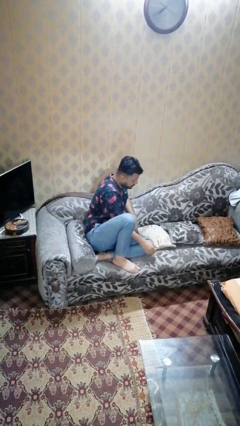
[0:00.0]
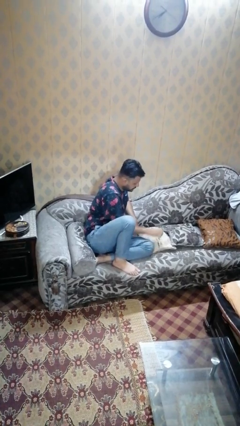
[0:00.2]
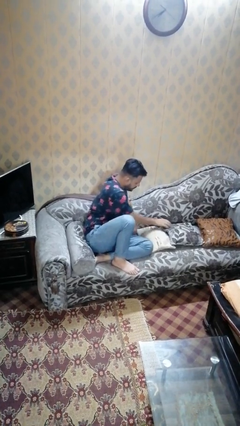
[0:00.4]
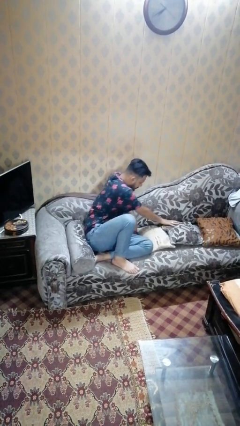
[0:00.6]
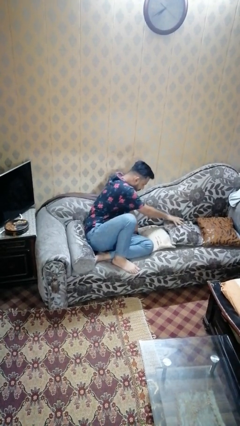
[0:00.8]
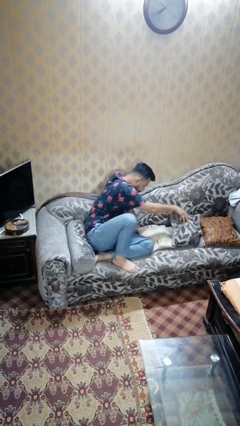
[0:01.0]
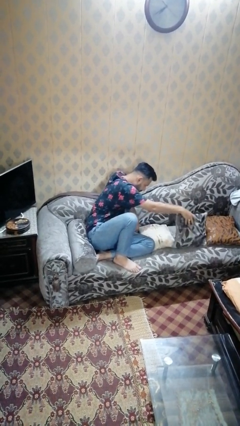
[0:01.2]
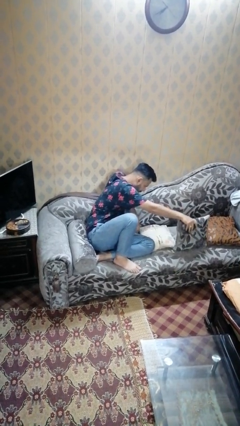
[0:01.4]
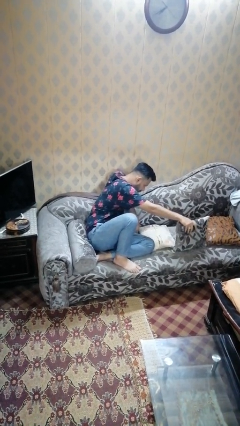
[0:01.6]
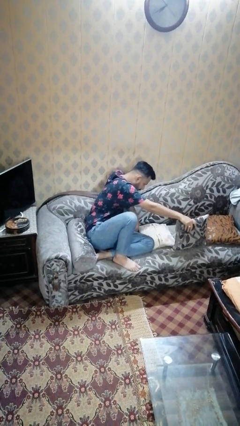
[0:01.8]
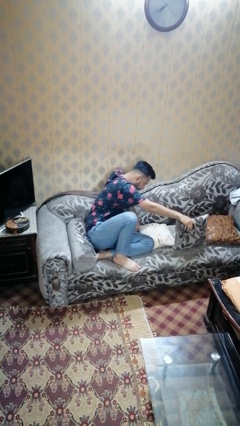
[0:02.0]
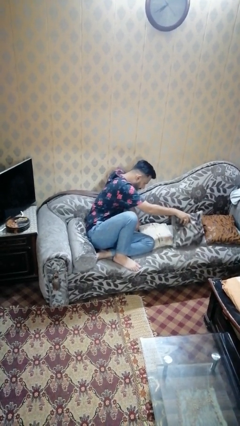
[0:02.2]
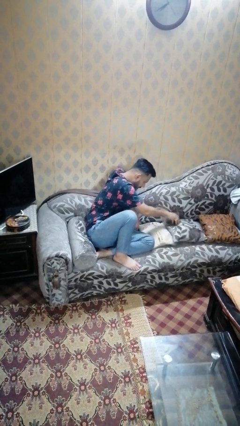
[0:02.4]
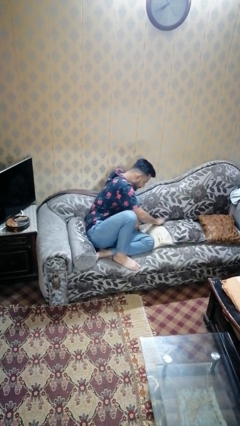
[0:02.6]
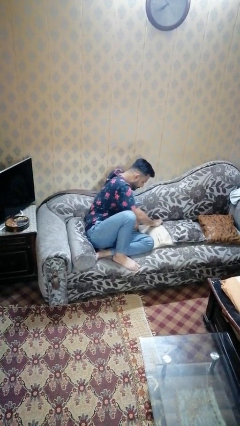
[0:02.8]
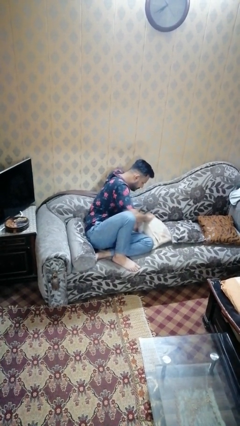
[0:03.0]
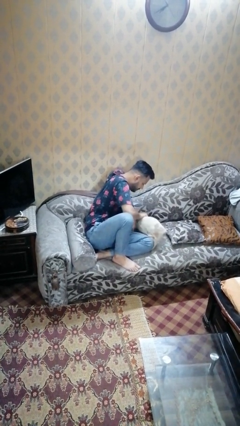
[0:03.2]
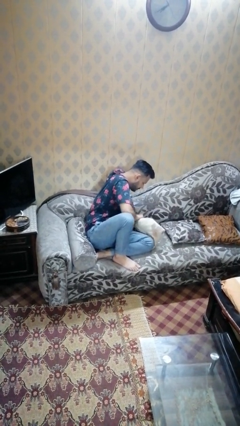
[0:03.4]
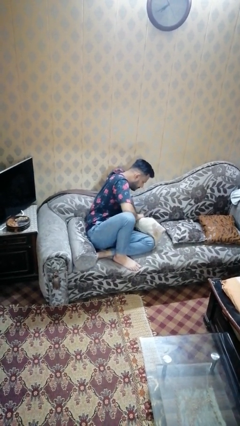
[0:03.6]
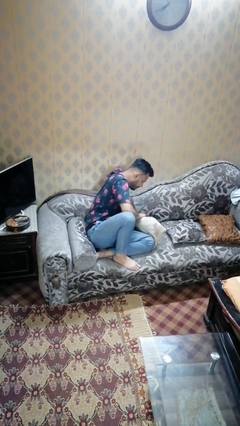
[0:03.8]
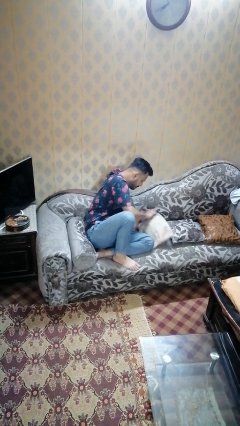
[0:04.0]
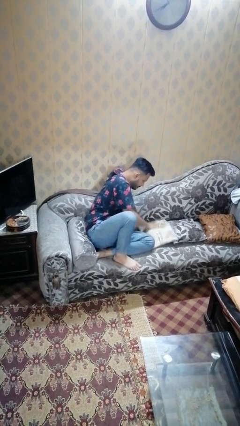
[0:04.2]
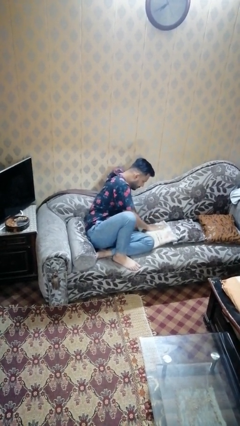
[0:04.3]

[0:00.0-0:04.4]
person searches in couch

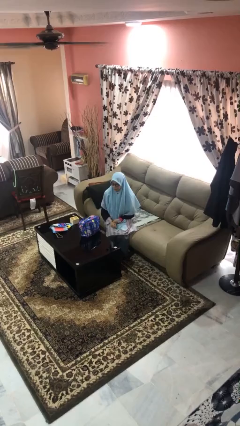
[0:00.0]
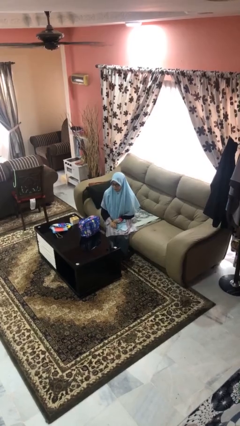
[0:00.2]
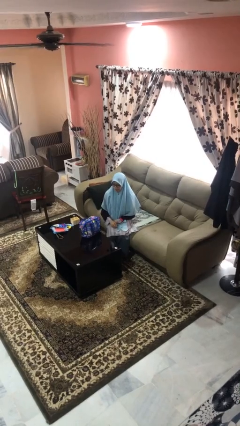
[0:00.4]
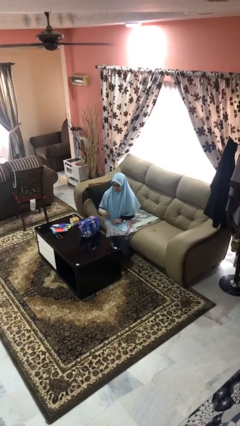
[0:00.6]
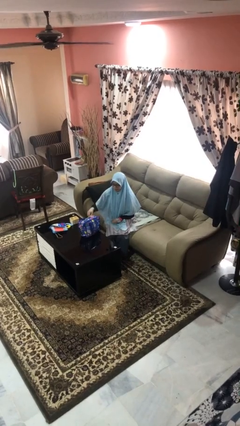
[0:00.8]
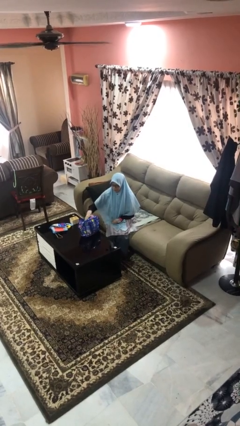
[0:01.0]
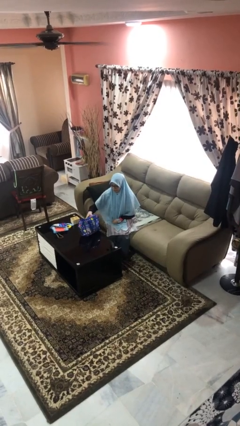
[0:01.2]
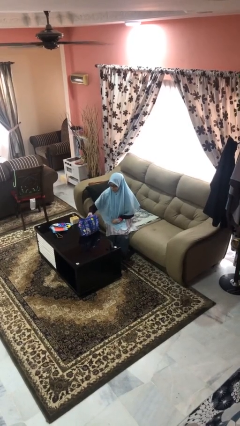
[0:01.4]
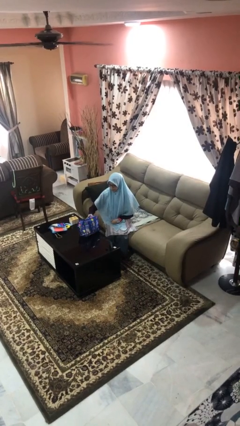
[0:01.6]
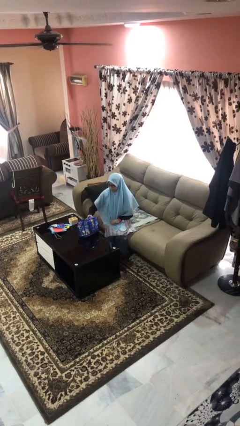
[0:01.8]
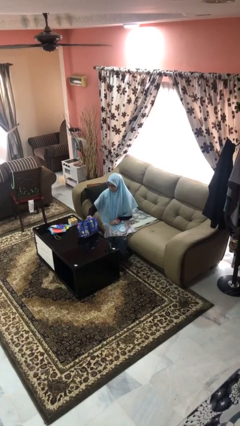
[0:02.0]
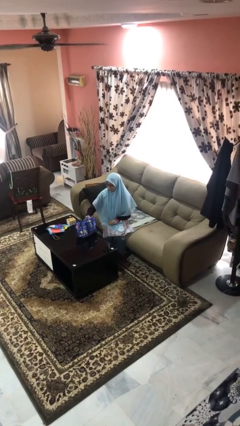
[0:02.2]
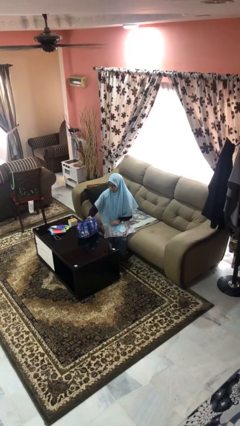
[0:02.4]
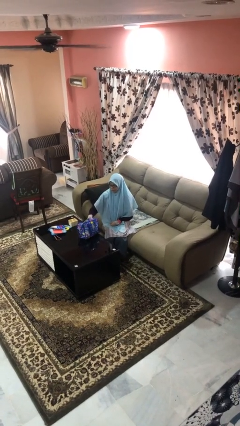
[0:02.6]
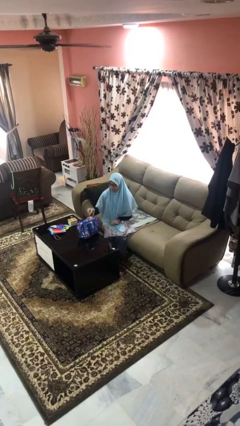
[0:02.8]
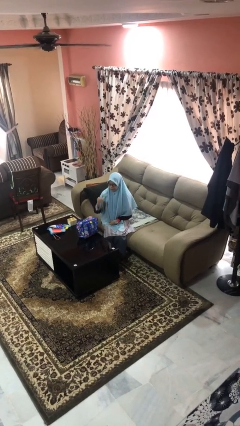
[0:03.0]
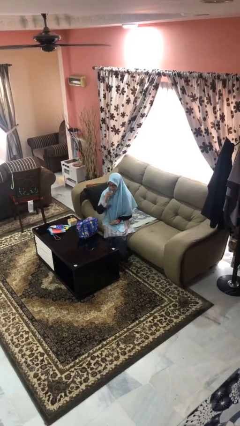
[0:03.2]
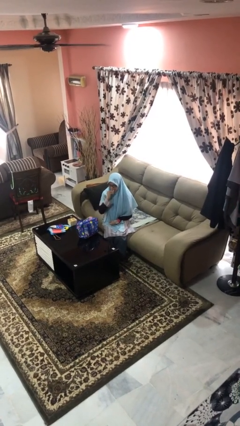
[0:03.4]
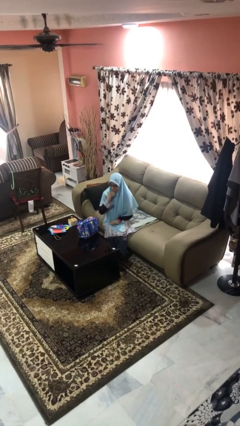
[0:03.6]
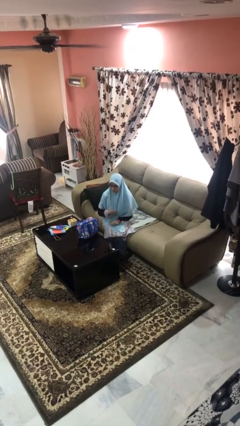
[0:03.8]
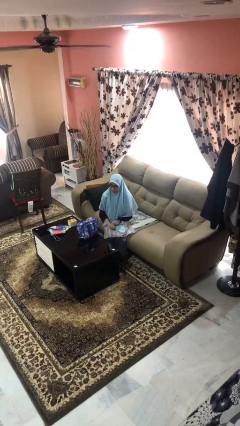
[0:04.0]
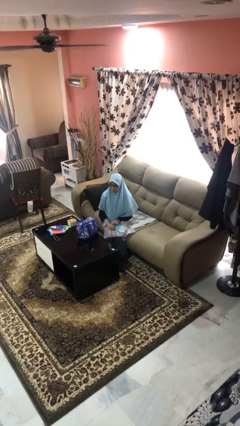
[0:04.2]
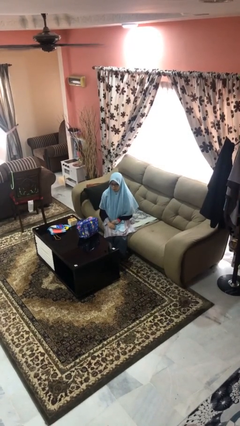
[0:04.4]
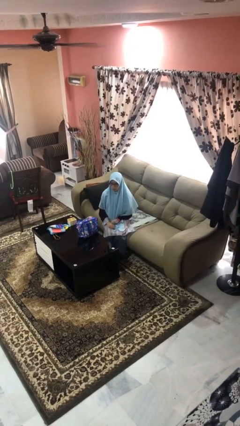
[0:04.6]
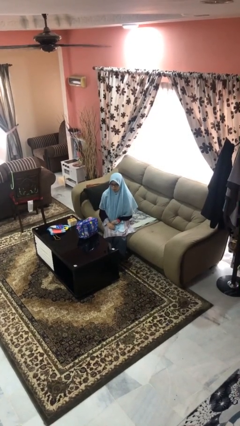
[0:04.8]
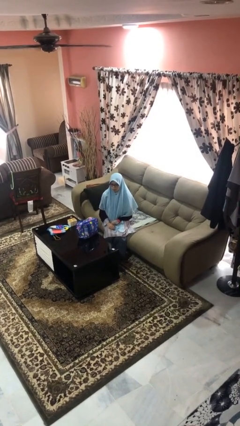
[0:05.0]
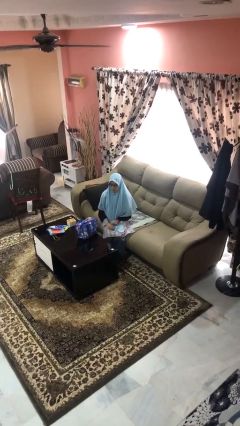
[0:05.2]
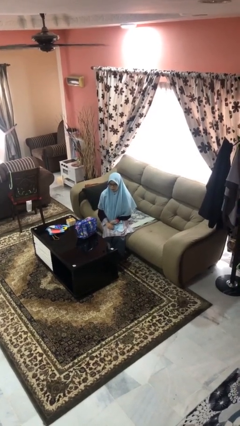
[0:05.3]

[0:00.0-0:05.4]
person eats snack from bag

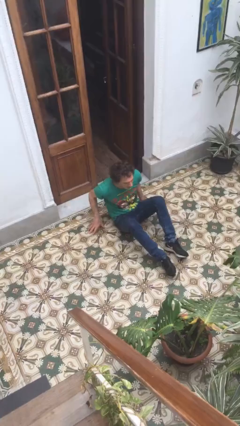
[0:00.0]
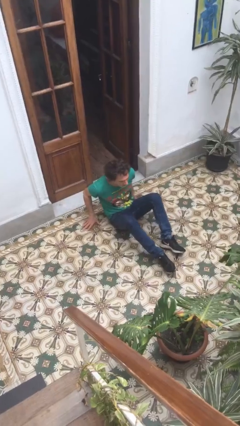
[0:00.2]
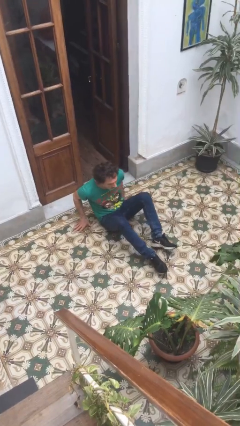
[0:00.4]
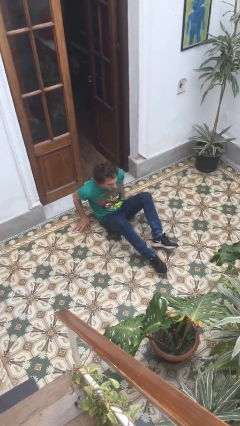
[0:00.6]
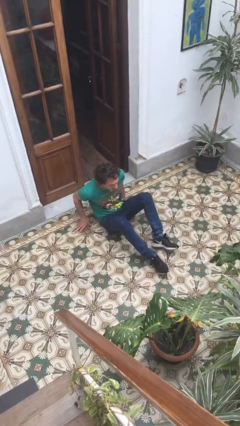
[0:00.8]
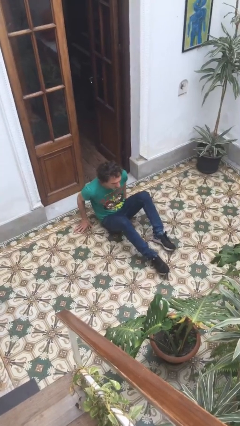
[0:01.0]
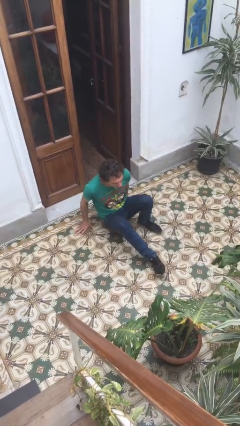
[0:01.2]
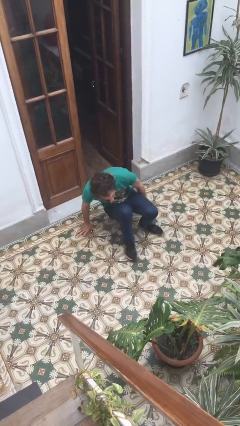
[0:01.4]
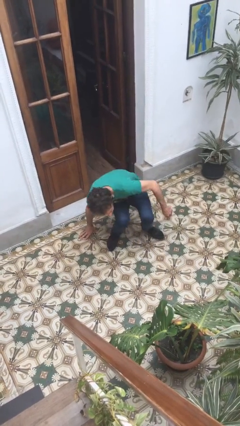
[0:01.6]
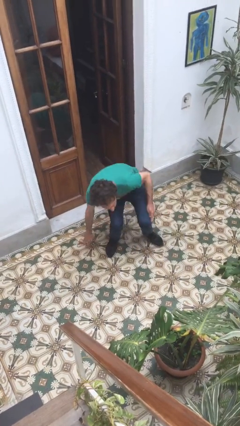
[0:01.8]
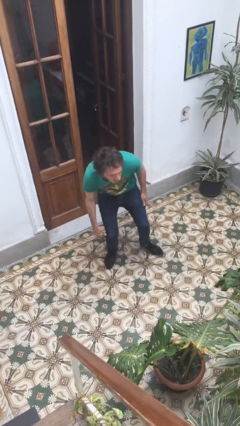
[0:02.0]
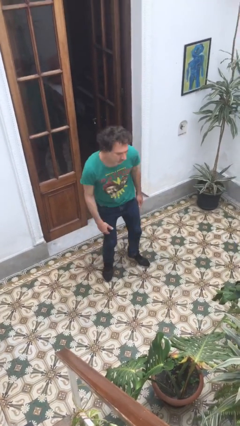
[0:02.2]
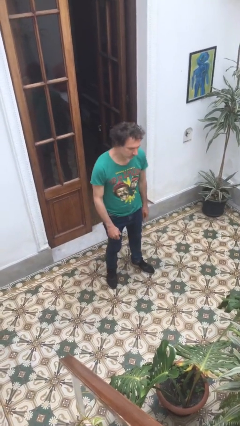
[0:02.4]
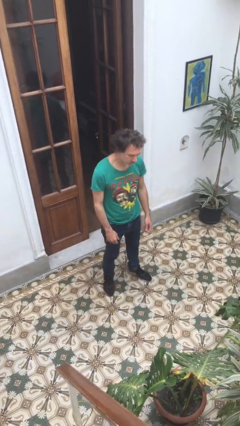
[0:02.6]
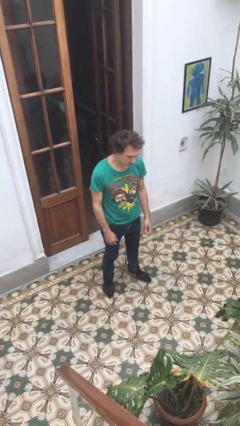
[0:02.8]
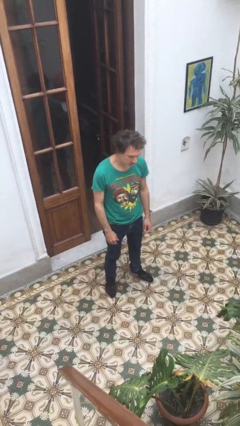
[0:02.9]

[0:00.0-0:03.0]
person stands up

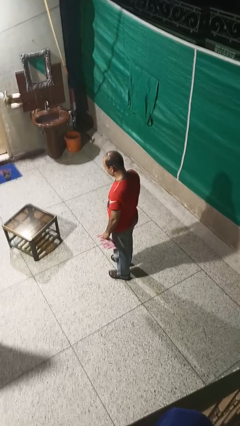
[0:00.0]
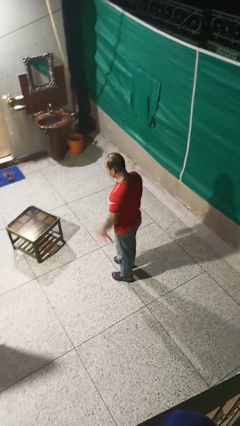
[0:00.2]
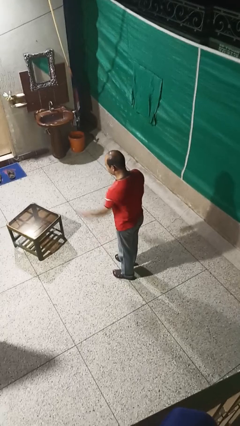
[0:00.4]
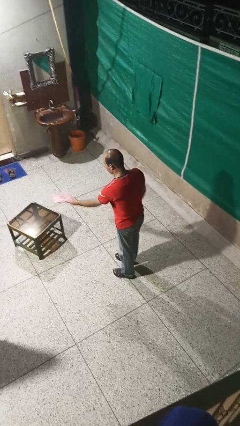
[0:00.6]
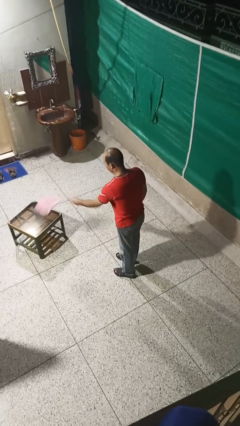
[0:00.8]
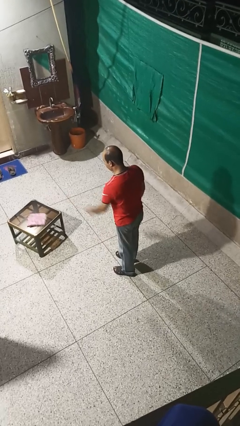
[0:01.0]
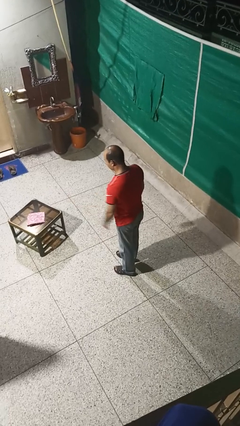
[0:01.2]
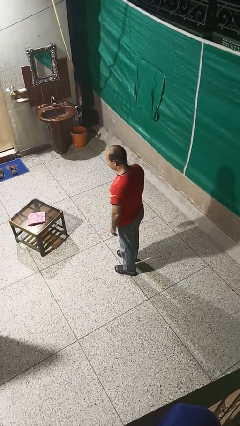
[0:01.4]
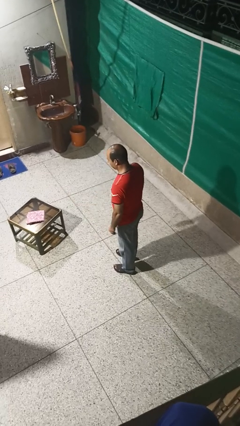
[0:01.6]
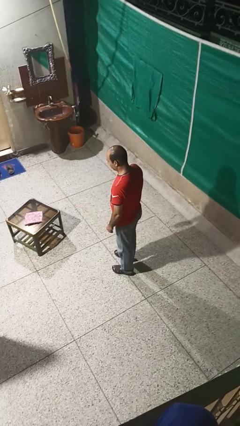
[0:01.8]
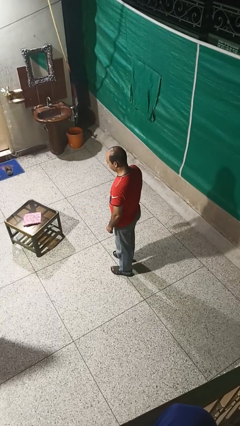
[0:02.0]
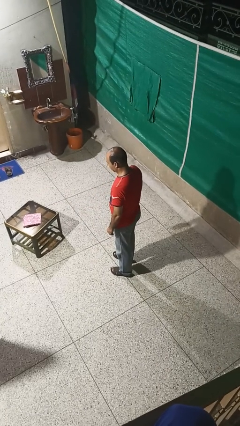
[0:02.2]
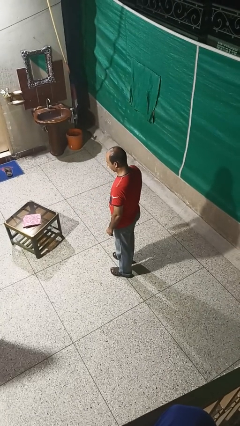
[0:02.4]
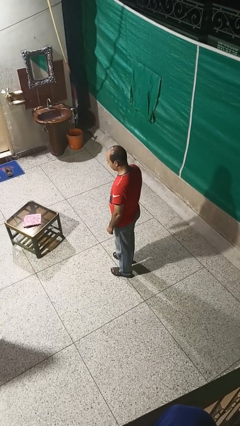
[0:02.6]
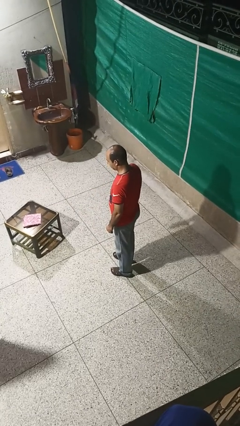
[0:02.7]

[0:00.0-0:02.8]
person throws object on table

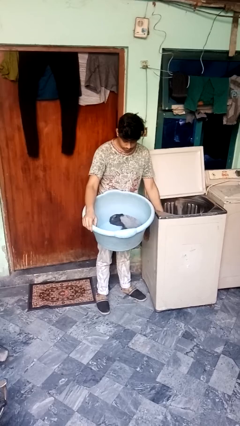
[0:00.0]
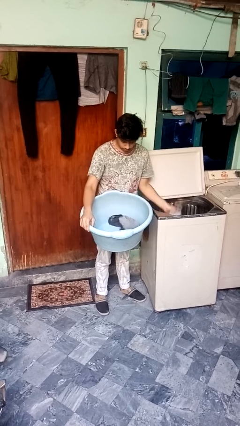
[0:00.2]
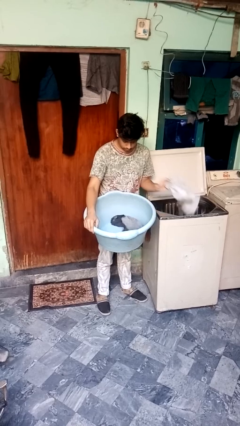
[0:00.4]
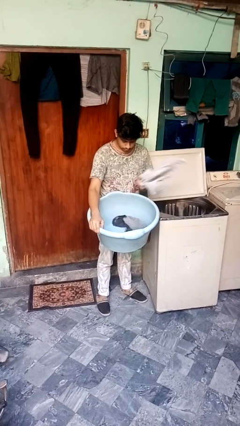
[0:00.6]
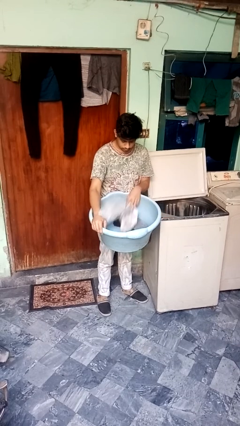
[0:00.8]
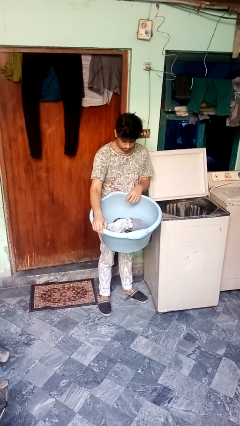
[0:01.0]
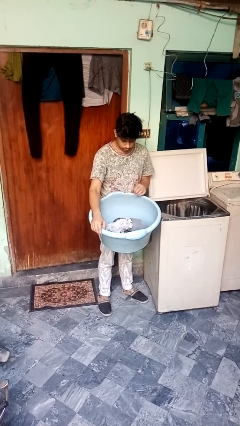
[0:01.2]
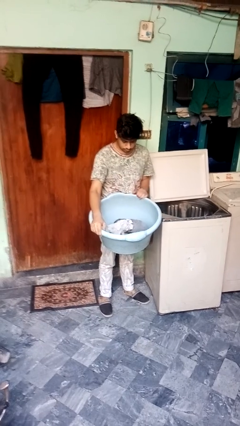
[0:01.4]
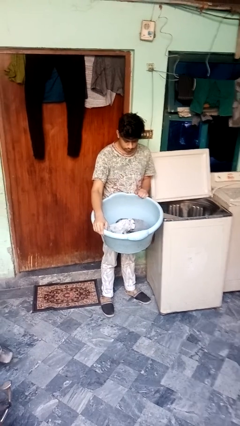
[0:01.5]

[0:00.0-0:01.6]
person loads clotheswasher
